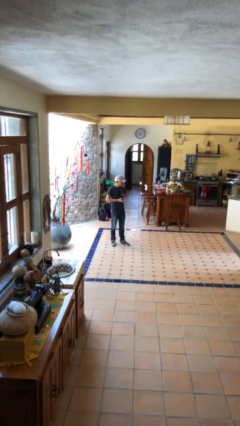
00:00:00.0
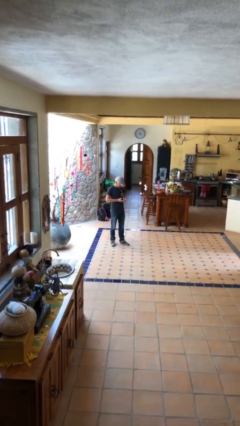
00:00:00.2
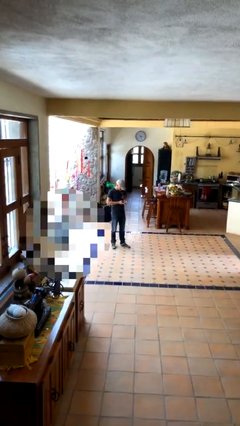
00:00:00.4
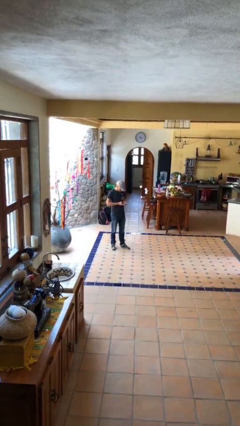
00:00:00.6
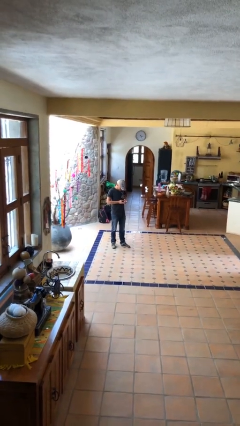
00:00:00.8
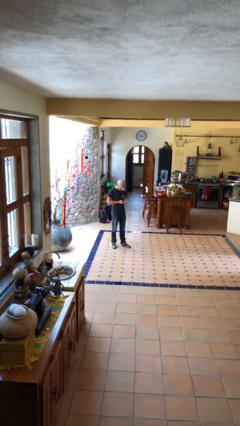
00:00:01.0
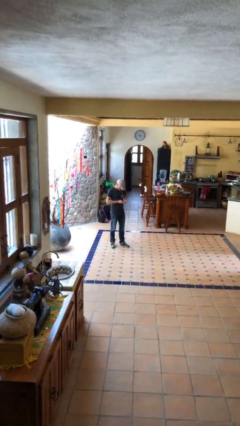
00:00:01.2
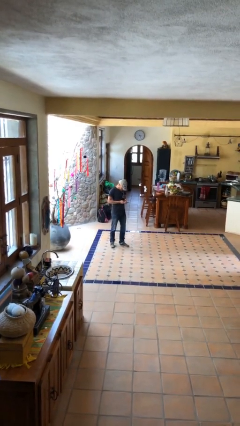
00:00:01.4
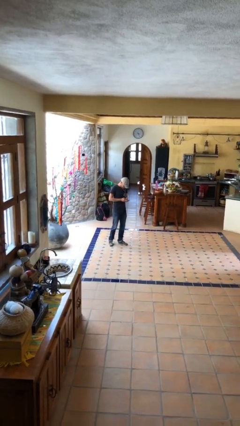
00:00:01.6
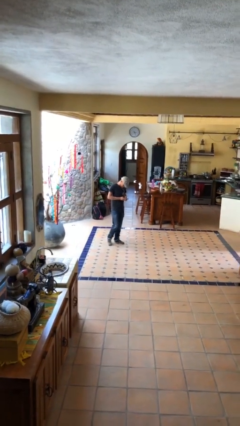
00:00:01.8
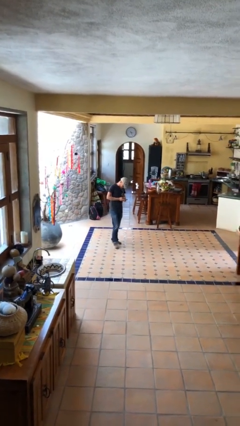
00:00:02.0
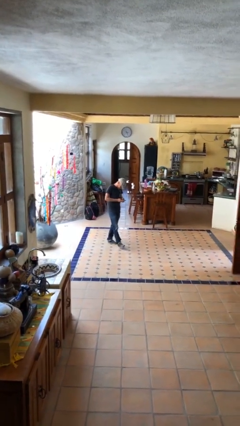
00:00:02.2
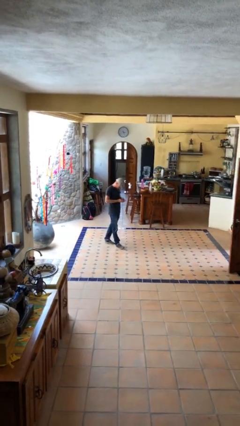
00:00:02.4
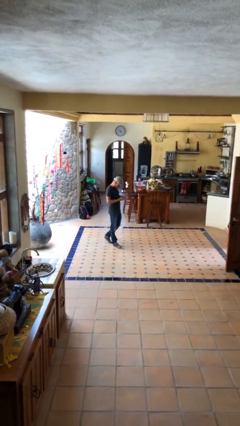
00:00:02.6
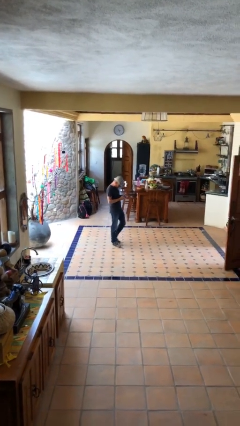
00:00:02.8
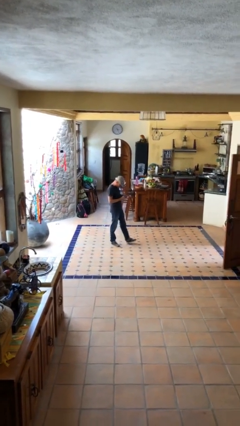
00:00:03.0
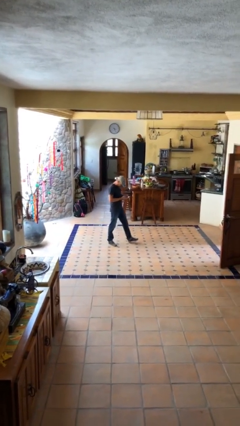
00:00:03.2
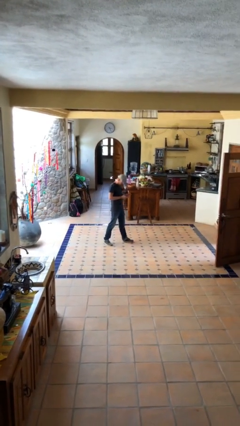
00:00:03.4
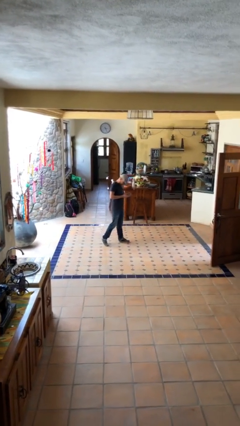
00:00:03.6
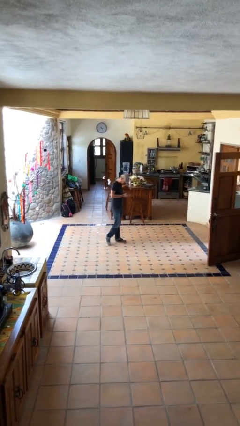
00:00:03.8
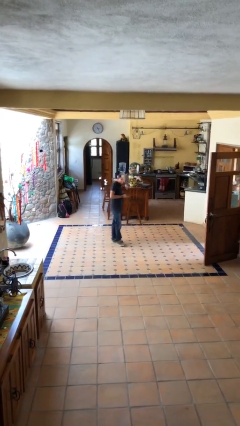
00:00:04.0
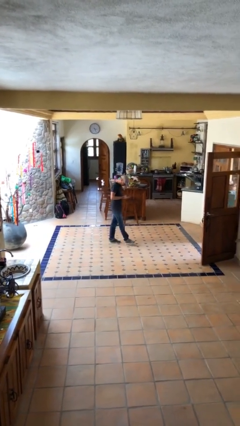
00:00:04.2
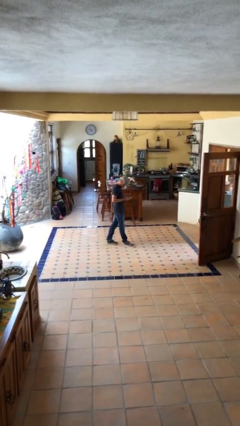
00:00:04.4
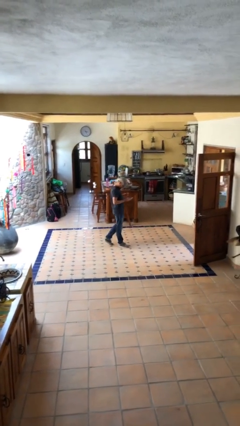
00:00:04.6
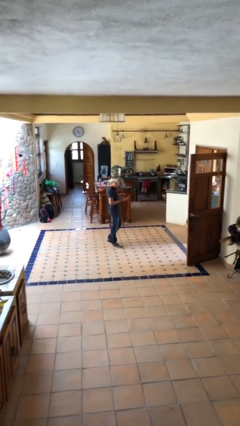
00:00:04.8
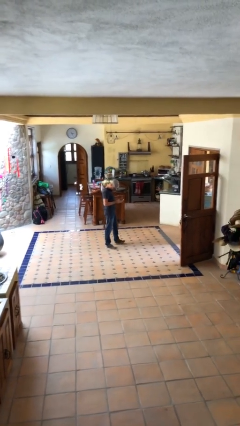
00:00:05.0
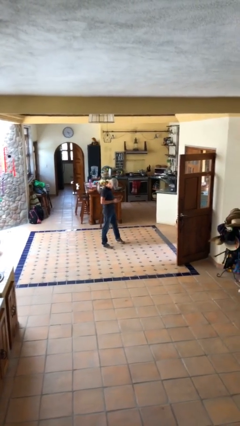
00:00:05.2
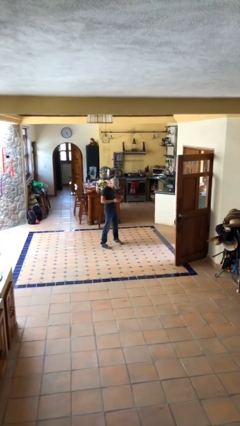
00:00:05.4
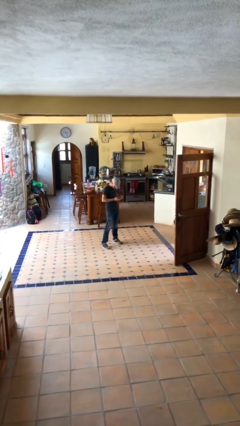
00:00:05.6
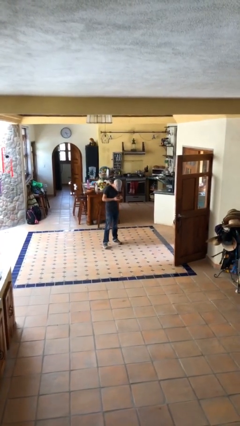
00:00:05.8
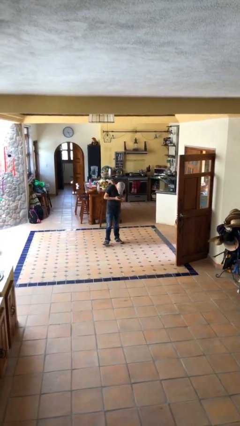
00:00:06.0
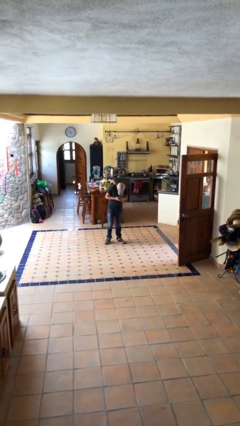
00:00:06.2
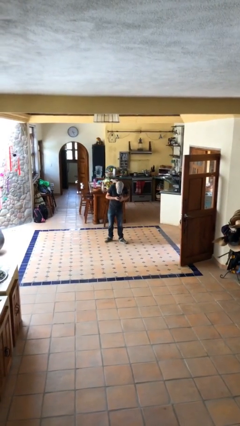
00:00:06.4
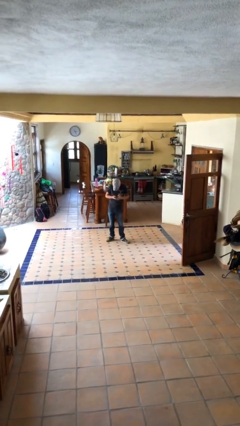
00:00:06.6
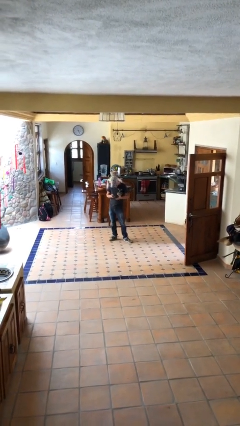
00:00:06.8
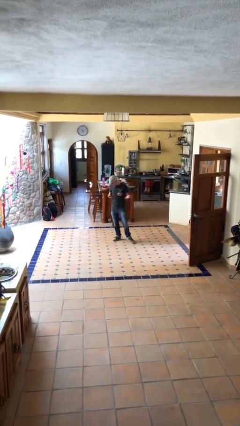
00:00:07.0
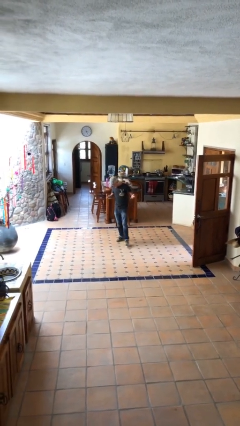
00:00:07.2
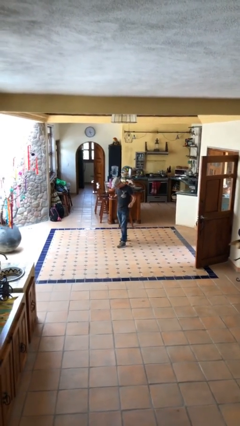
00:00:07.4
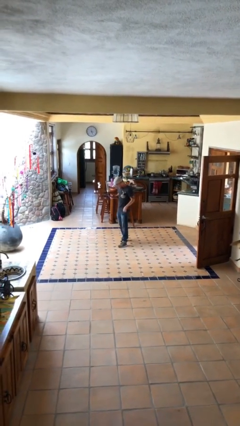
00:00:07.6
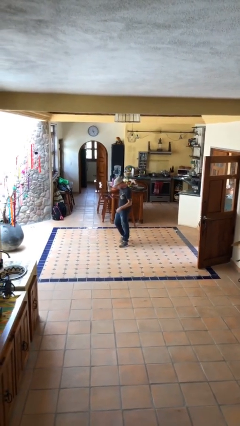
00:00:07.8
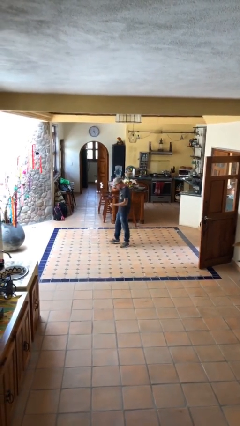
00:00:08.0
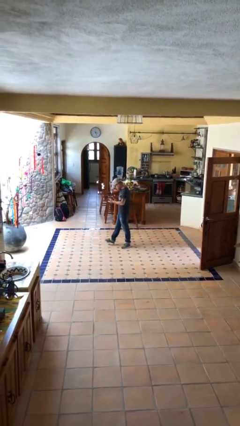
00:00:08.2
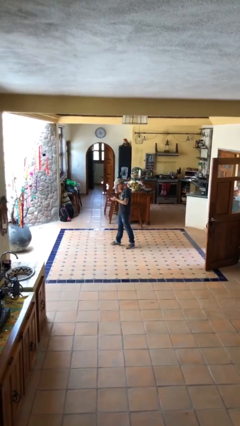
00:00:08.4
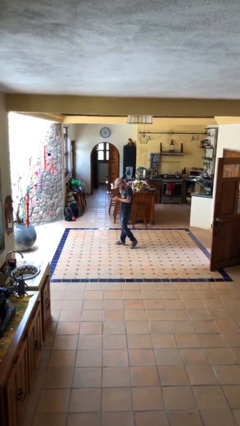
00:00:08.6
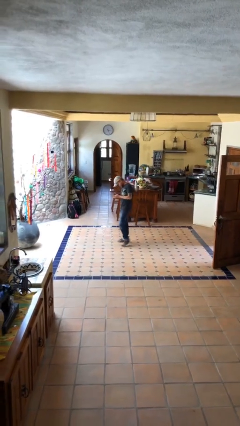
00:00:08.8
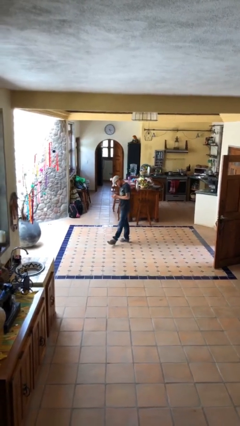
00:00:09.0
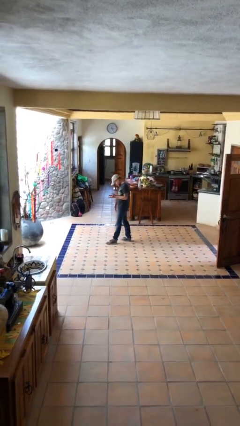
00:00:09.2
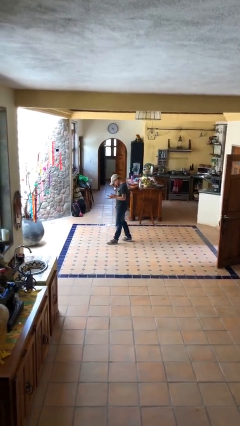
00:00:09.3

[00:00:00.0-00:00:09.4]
person texts on phone

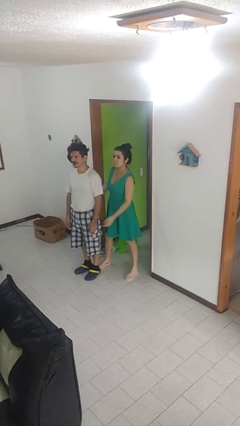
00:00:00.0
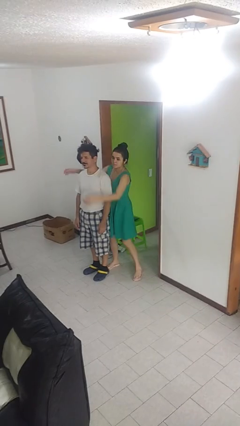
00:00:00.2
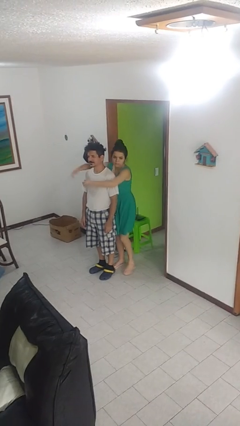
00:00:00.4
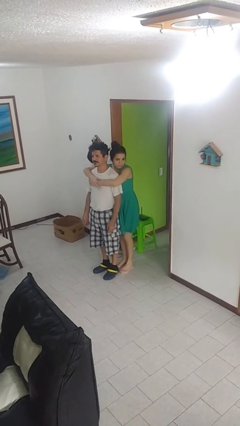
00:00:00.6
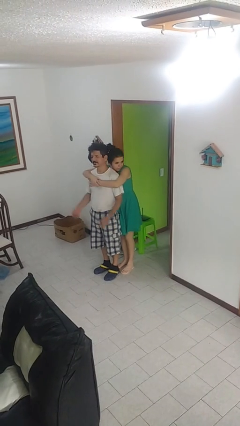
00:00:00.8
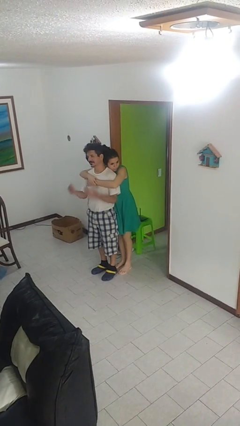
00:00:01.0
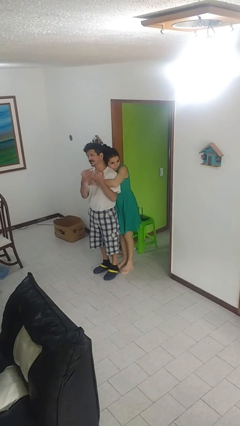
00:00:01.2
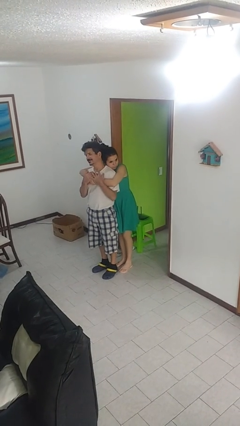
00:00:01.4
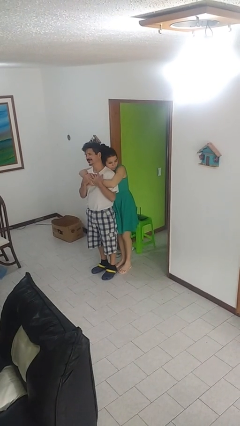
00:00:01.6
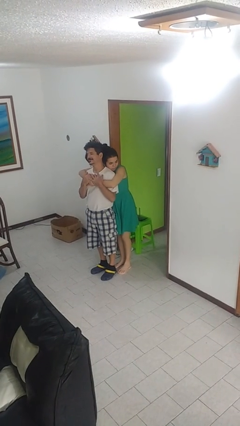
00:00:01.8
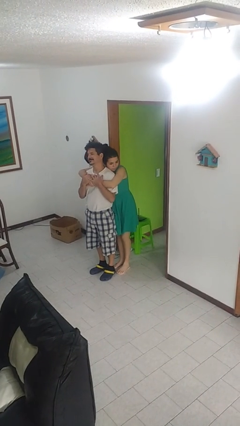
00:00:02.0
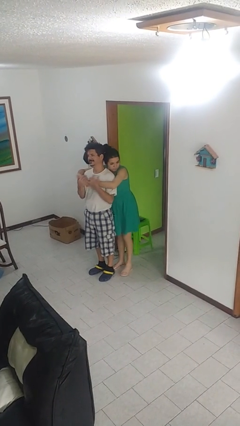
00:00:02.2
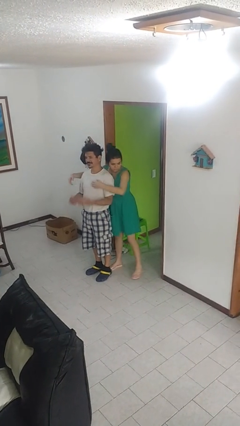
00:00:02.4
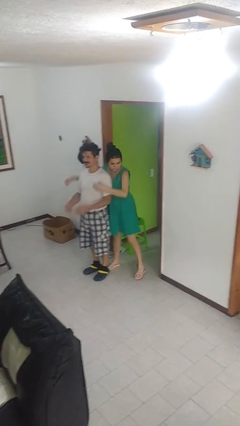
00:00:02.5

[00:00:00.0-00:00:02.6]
person hugs person from behind

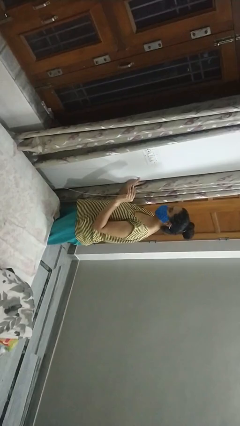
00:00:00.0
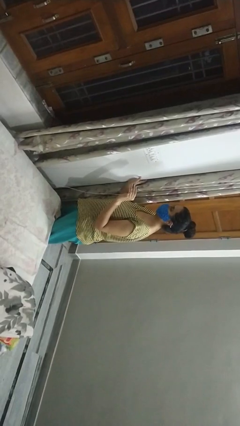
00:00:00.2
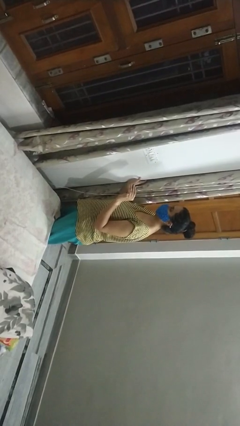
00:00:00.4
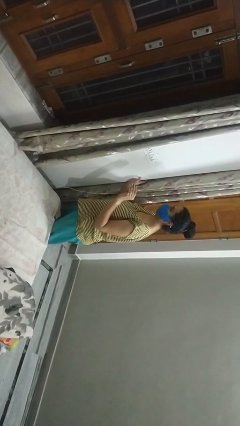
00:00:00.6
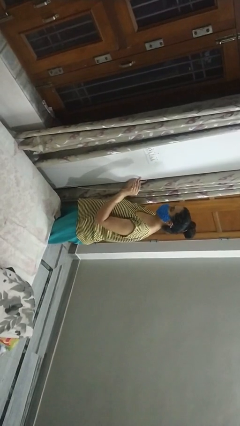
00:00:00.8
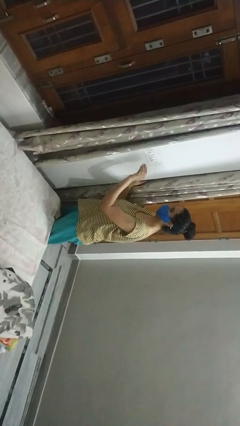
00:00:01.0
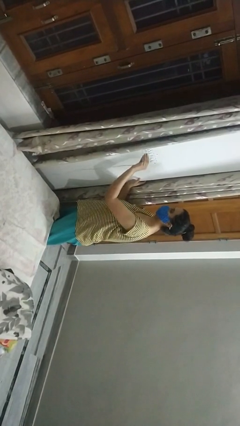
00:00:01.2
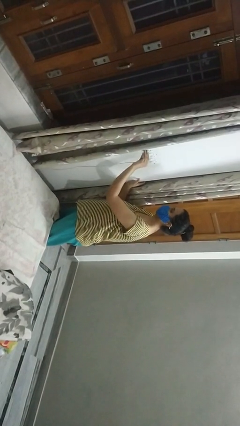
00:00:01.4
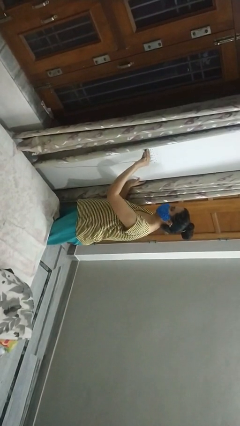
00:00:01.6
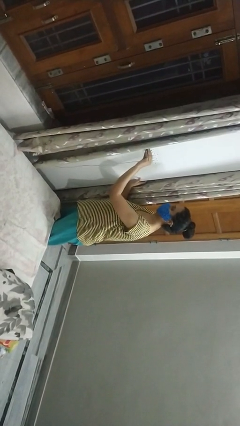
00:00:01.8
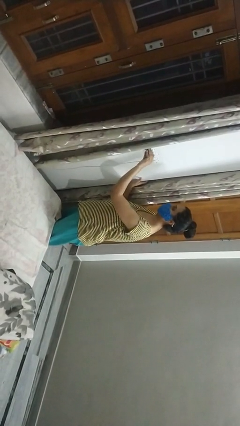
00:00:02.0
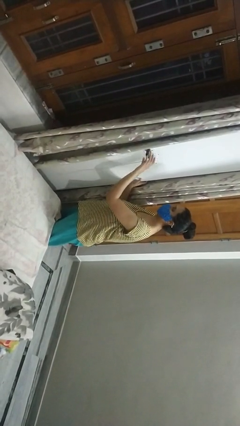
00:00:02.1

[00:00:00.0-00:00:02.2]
person plugs into electrical socket

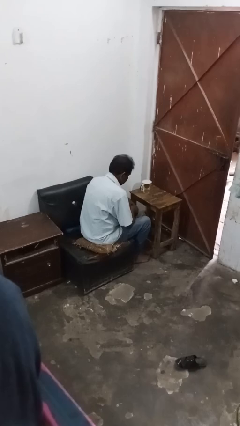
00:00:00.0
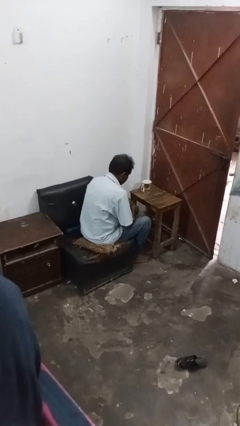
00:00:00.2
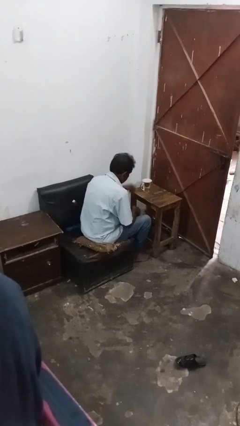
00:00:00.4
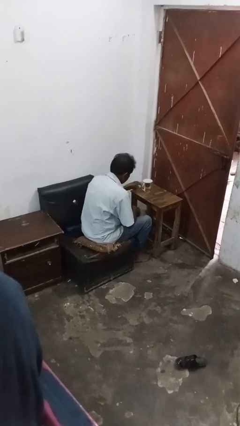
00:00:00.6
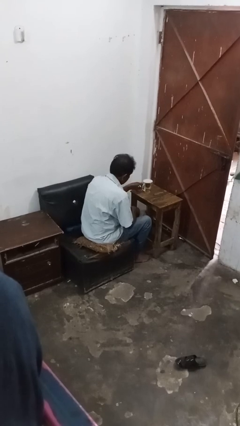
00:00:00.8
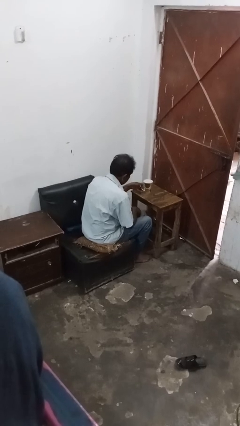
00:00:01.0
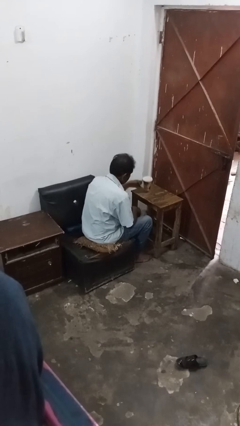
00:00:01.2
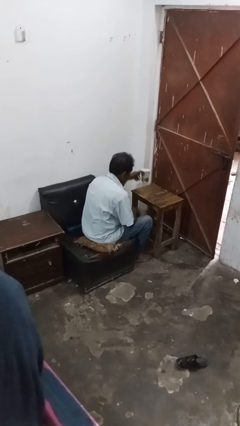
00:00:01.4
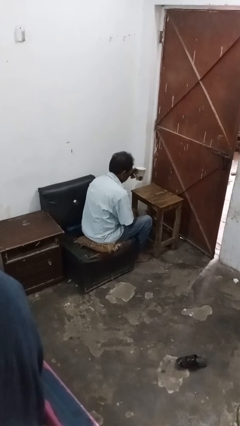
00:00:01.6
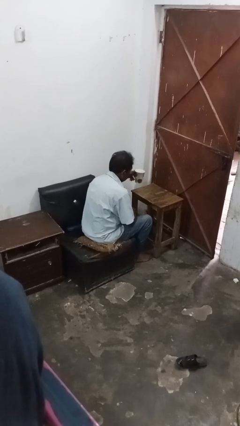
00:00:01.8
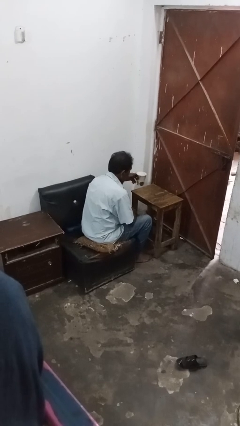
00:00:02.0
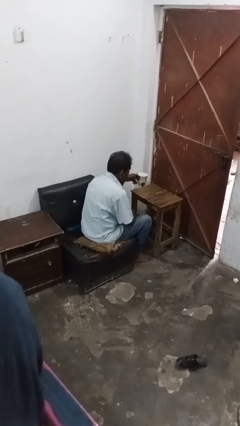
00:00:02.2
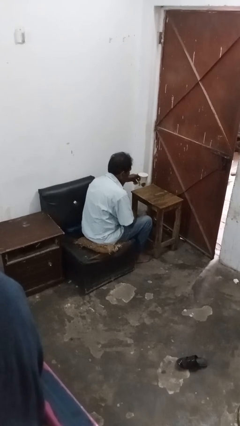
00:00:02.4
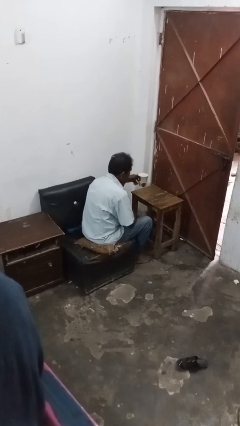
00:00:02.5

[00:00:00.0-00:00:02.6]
person picks up object from table

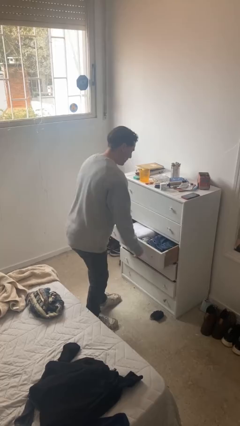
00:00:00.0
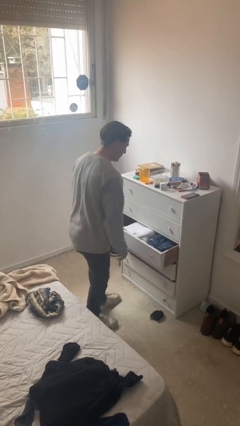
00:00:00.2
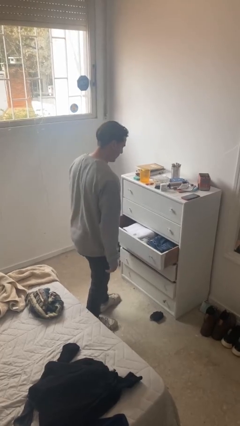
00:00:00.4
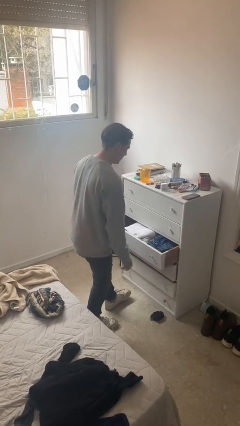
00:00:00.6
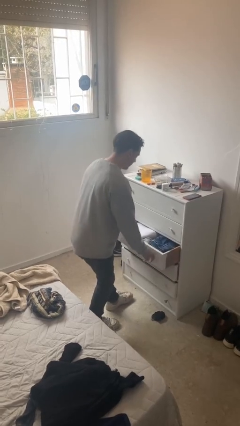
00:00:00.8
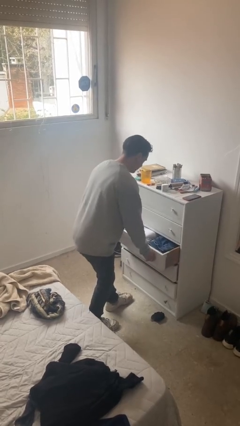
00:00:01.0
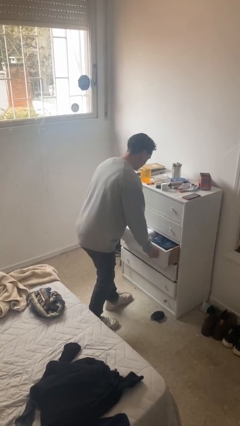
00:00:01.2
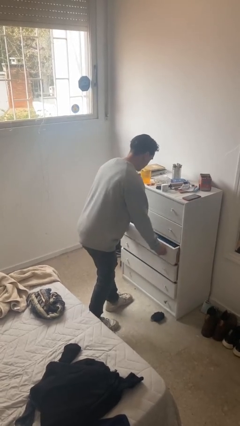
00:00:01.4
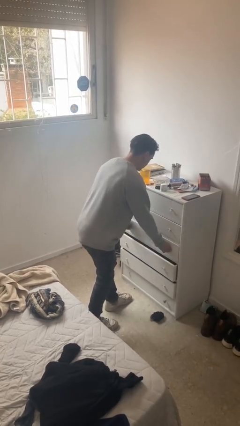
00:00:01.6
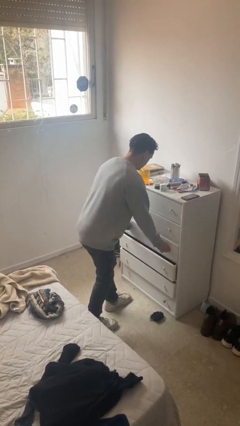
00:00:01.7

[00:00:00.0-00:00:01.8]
person closes dresser drawer
